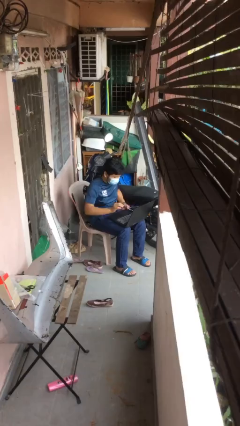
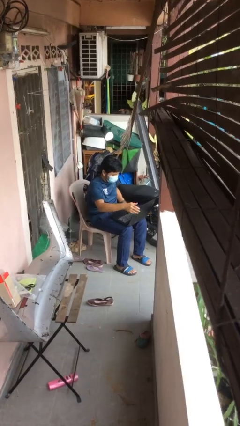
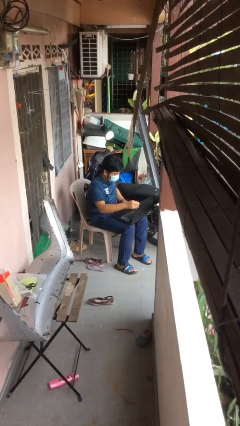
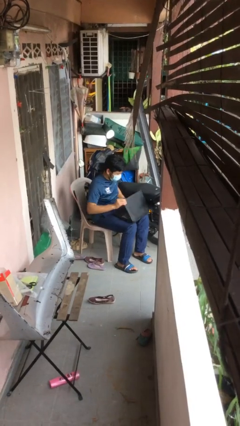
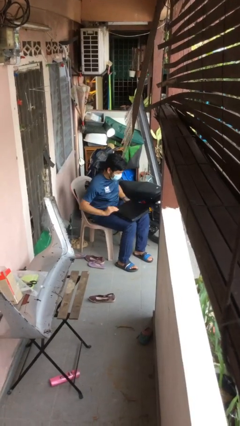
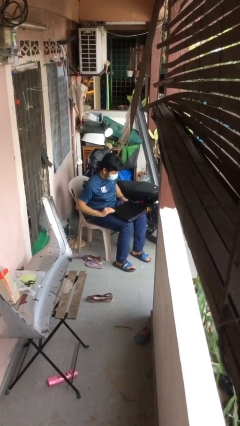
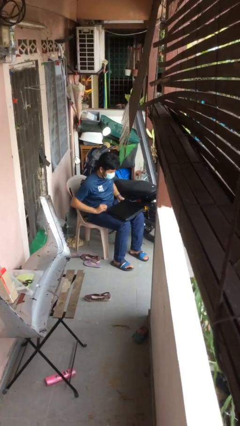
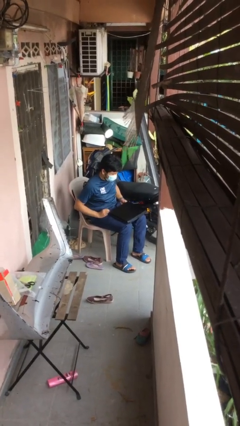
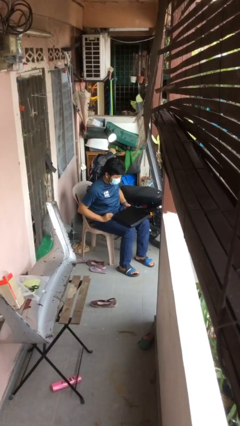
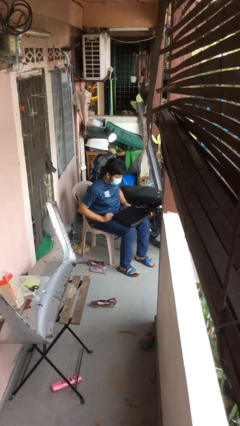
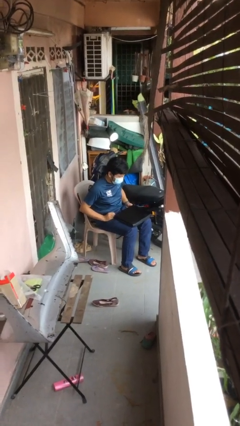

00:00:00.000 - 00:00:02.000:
person closes laptop

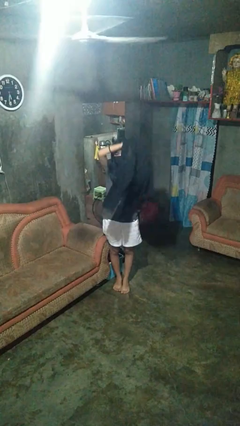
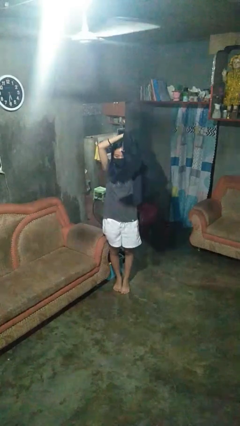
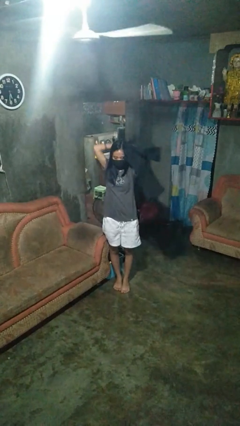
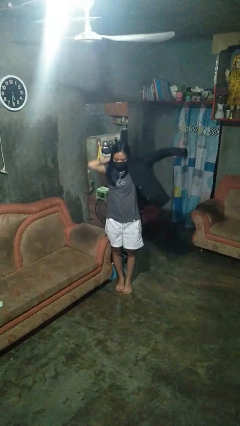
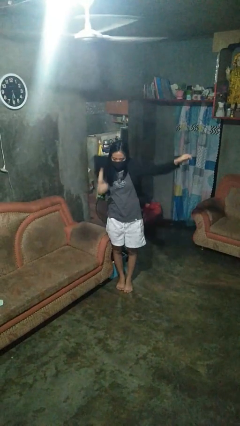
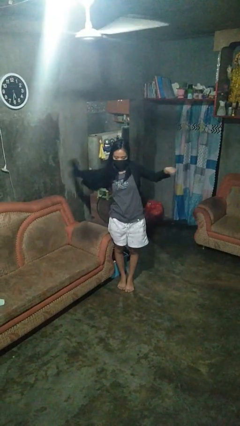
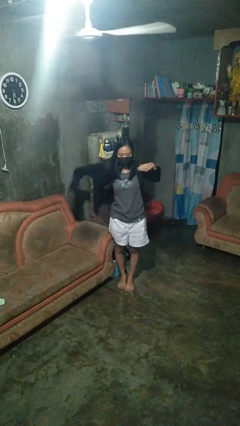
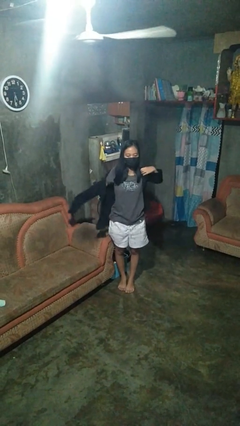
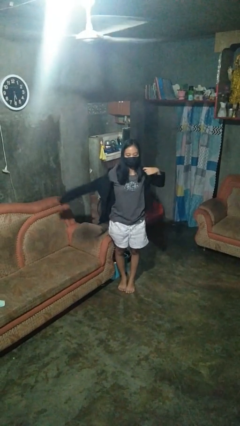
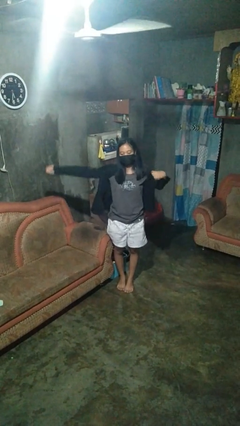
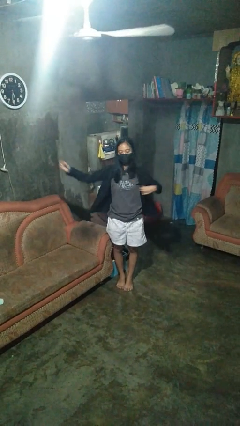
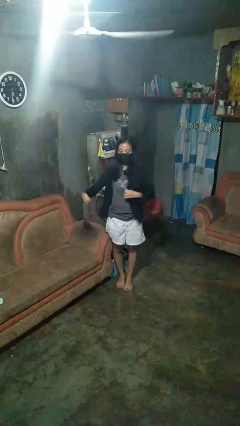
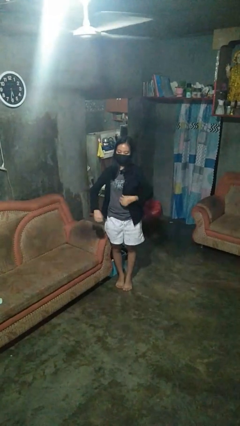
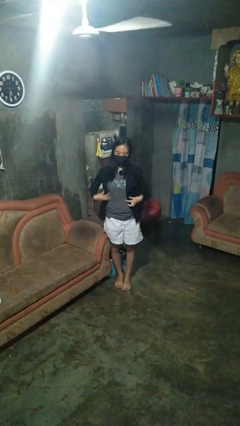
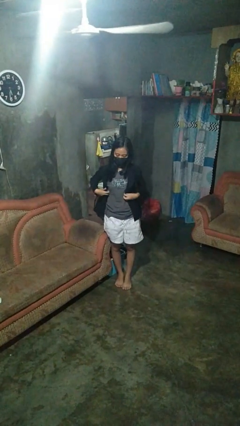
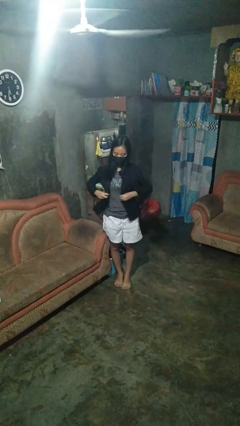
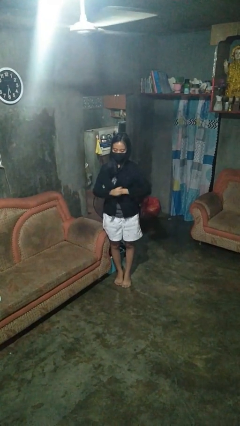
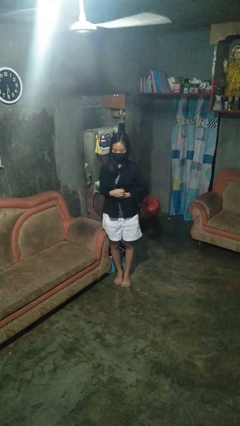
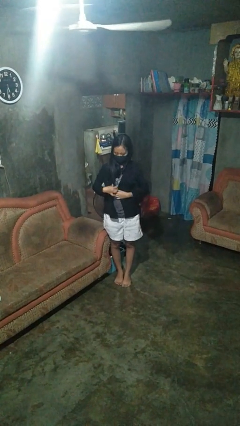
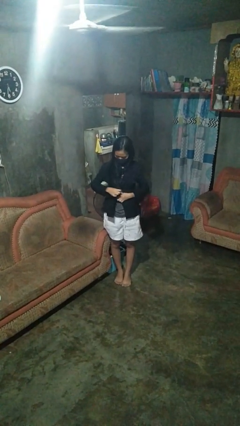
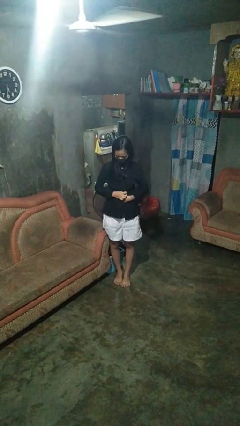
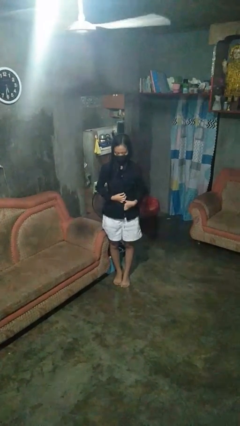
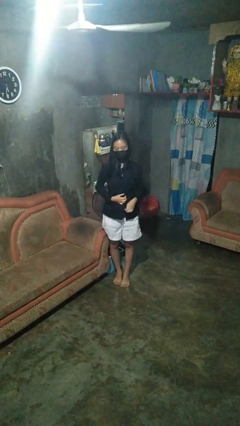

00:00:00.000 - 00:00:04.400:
person puts on shirt

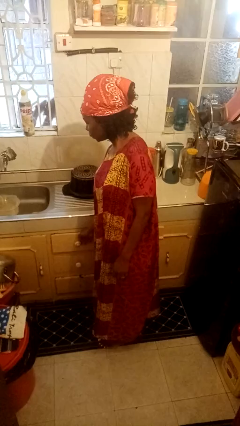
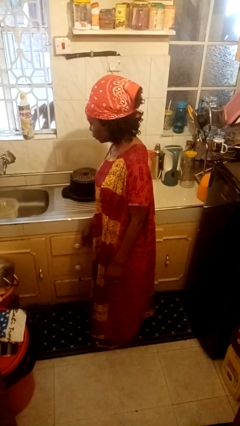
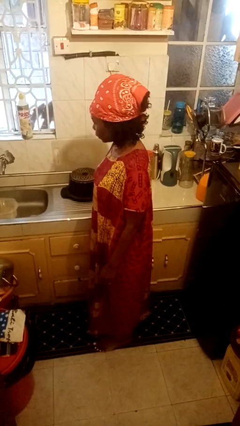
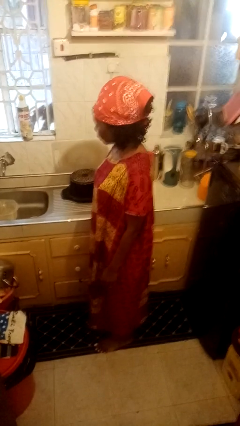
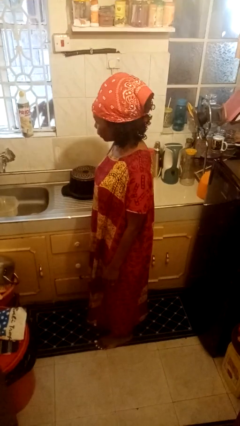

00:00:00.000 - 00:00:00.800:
person closes kitchen drawer

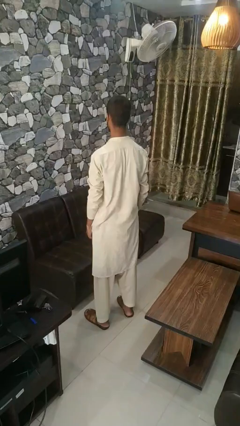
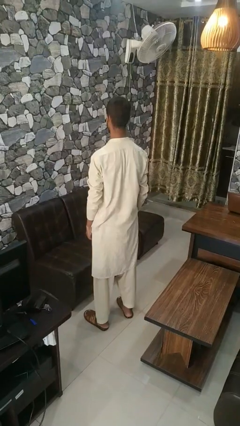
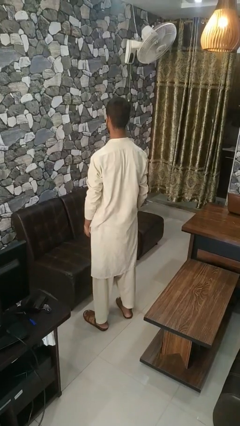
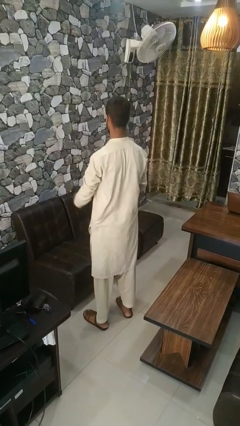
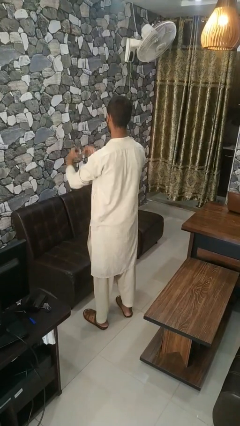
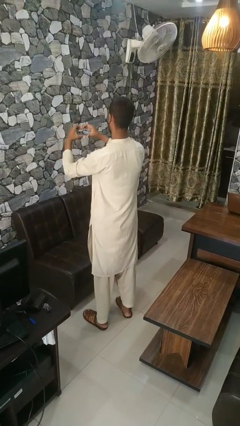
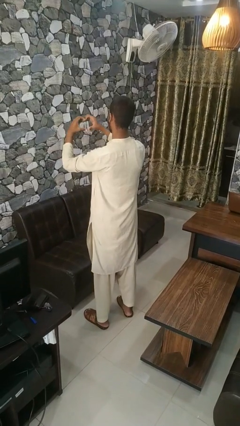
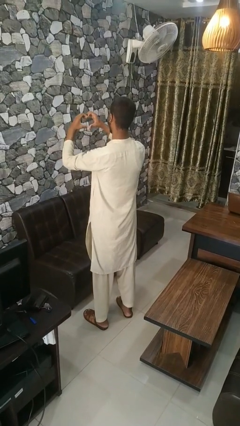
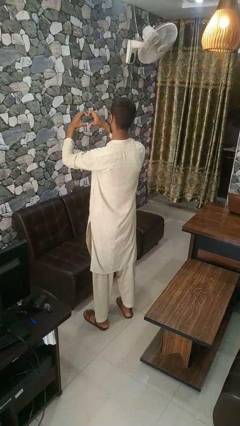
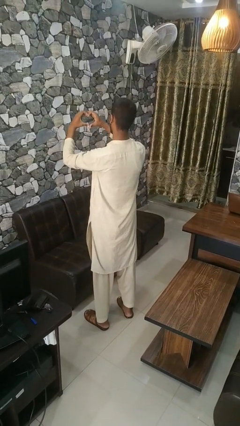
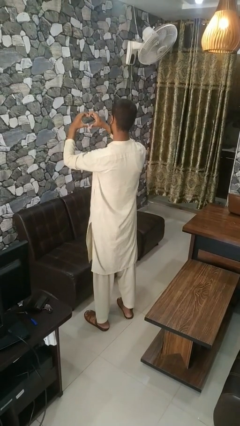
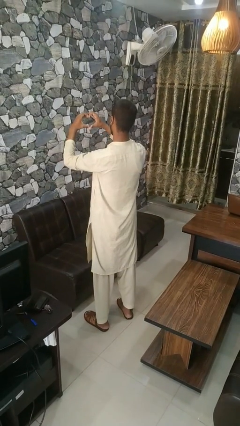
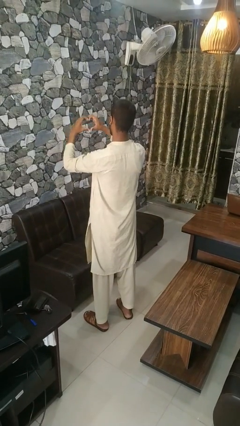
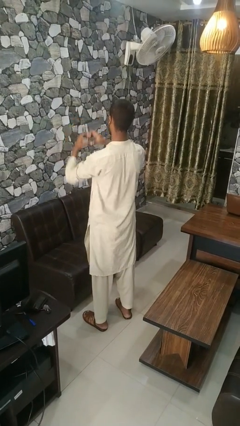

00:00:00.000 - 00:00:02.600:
person gestures heart

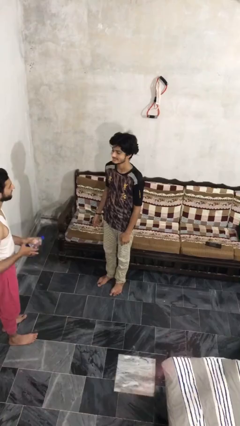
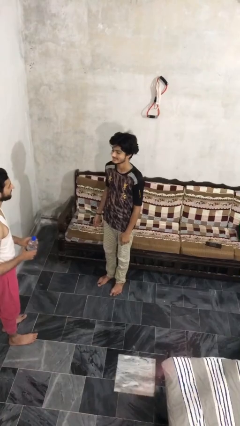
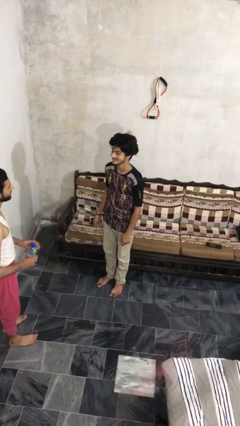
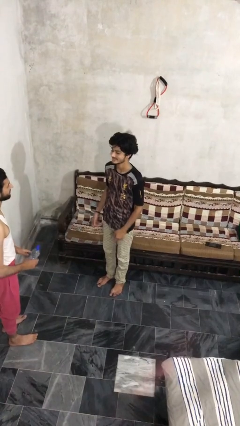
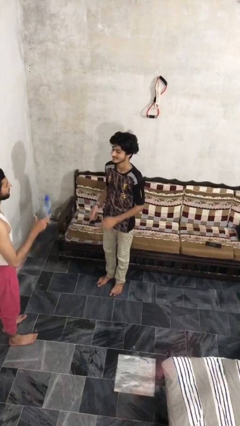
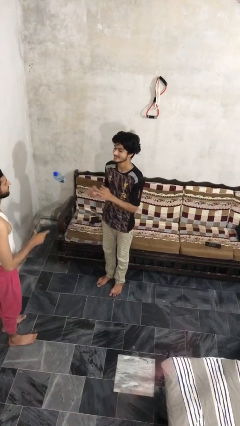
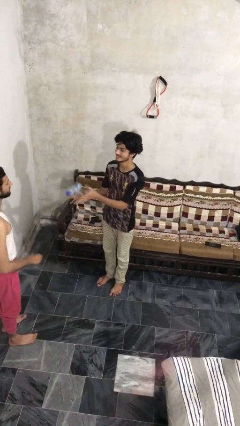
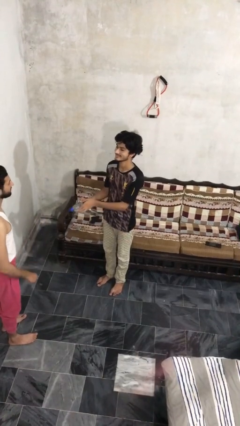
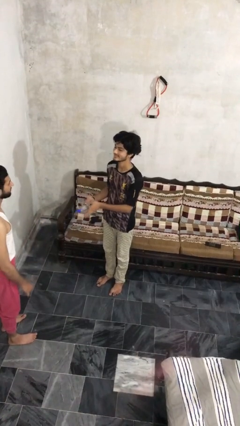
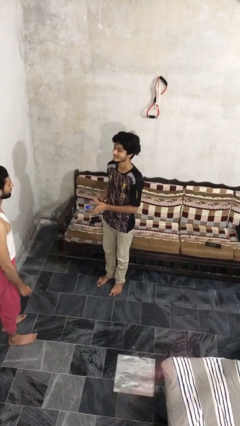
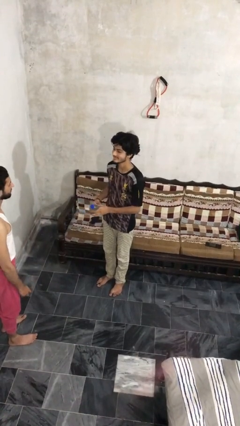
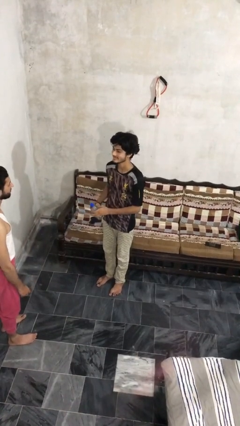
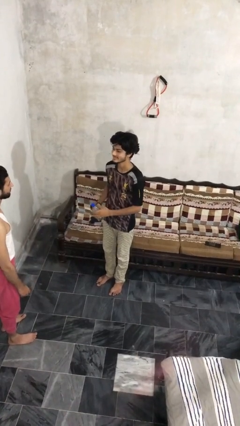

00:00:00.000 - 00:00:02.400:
person catches object from person

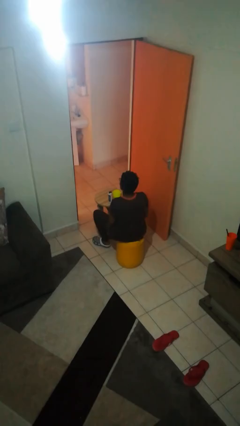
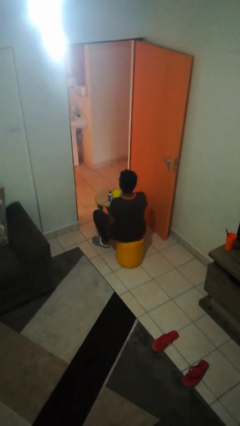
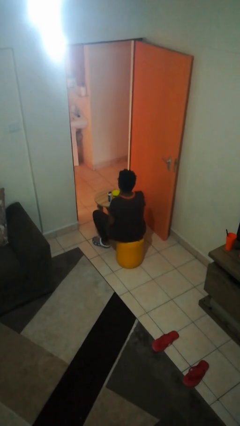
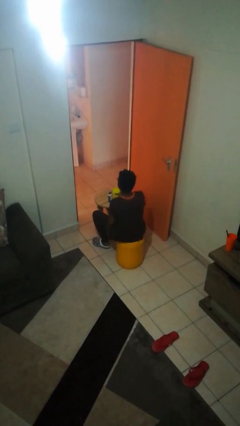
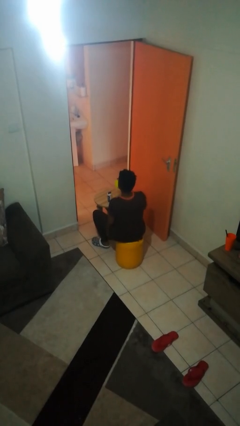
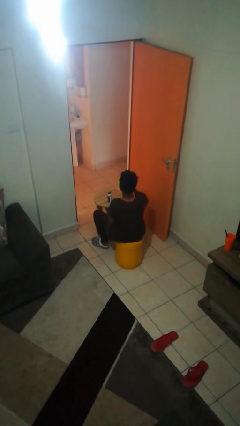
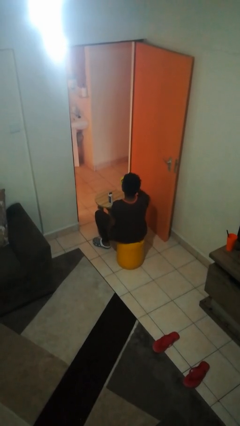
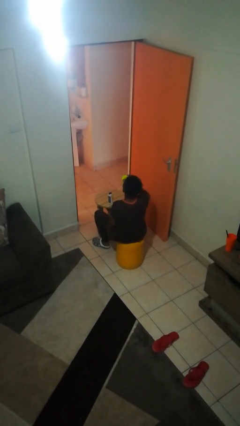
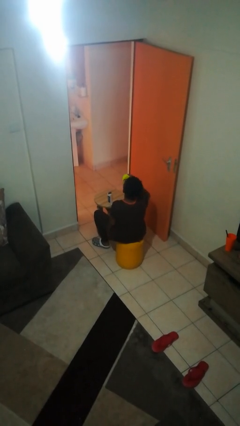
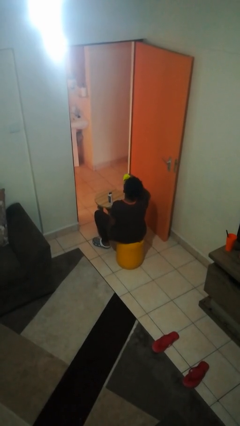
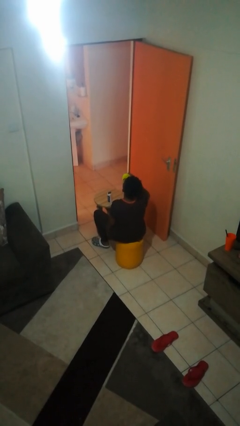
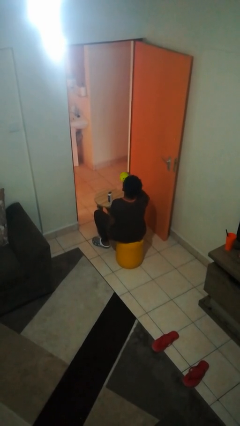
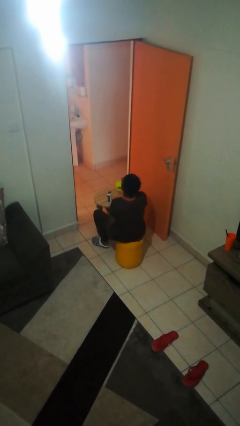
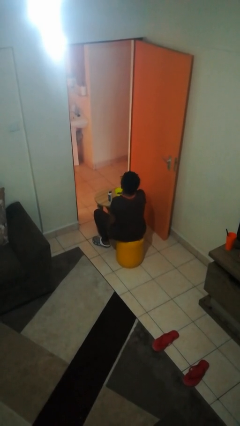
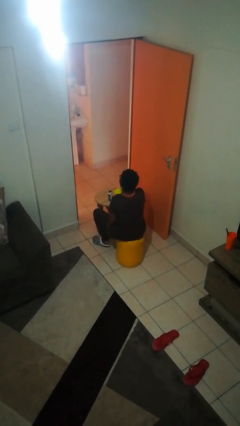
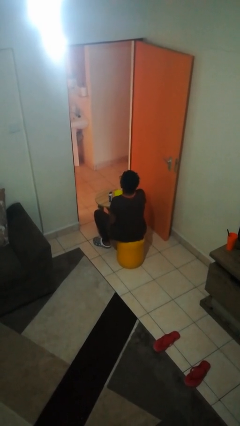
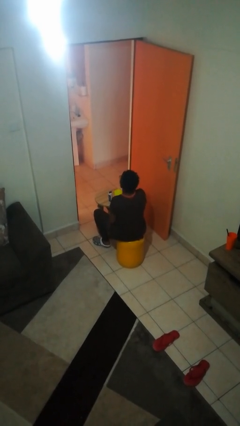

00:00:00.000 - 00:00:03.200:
person drinks from cup

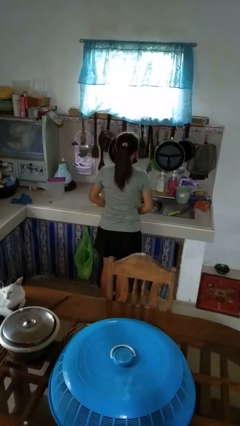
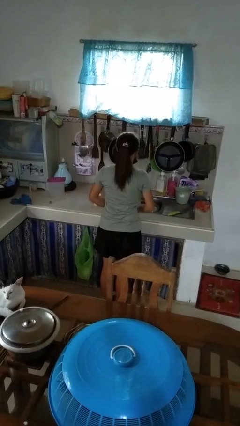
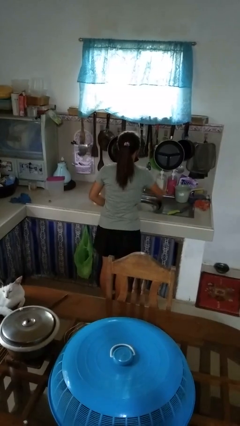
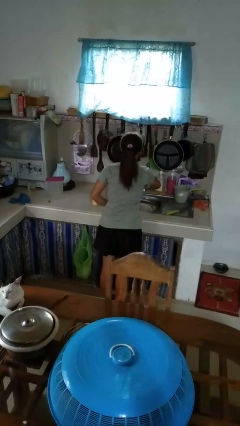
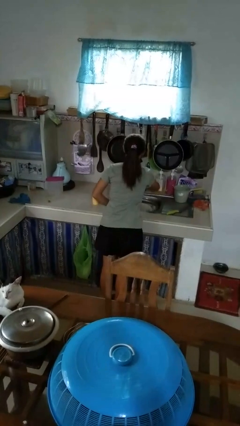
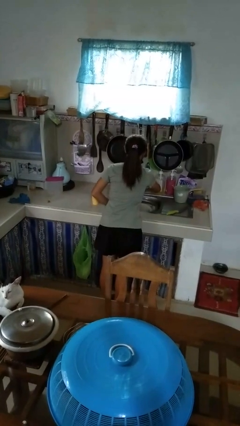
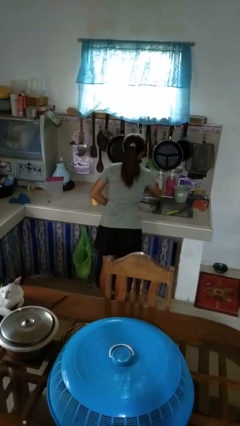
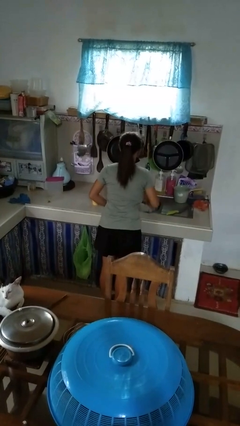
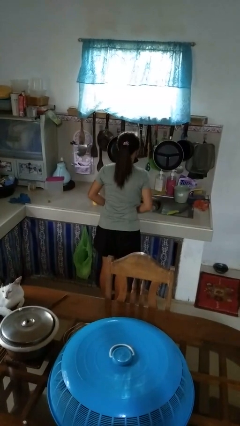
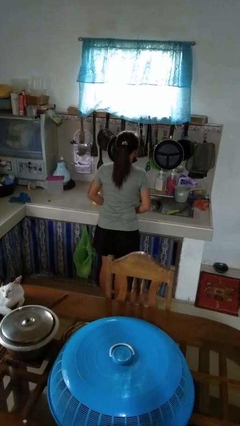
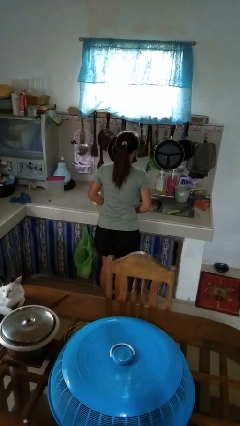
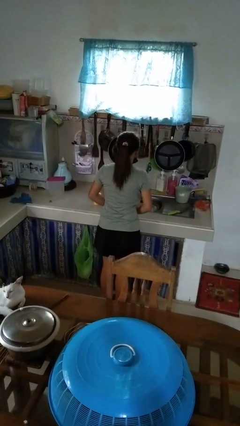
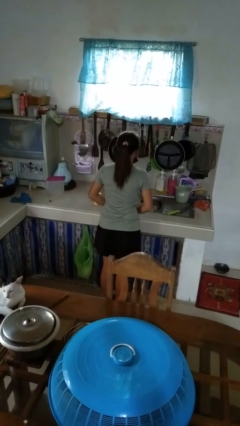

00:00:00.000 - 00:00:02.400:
person turns on faucet
